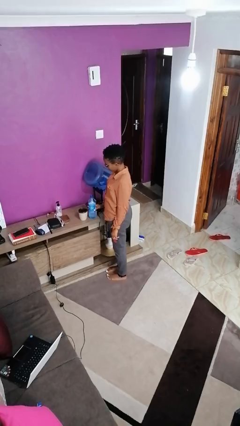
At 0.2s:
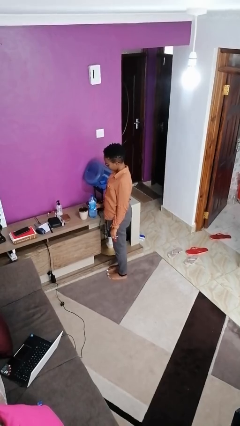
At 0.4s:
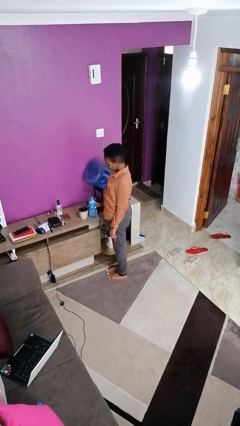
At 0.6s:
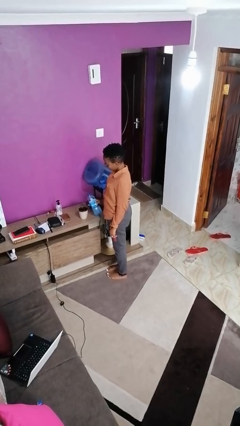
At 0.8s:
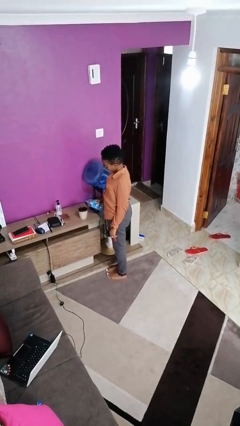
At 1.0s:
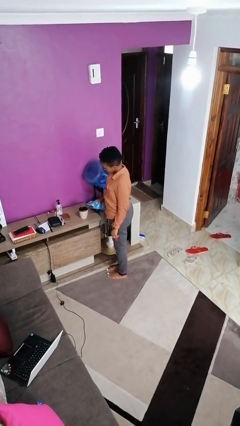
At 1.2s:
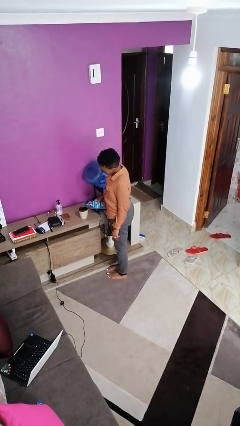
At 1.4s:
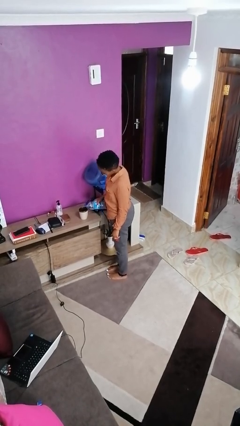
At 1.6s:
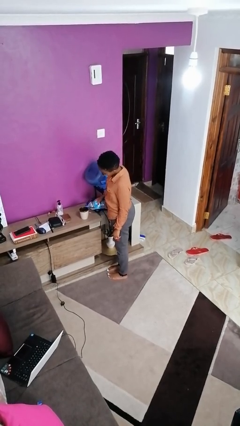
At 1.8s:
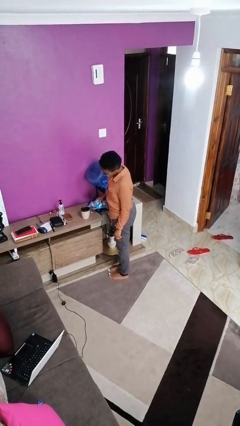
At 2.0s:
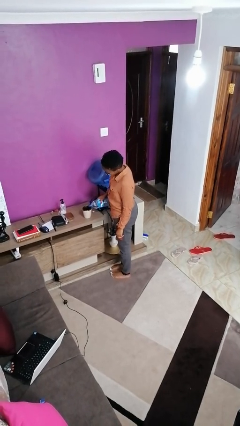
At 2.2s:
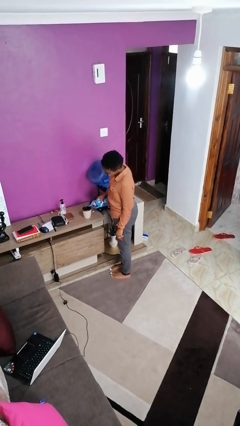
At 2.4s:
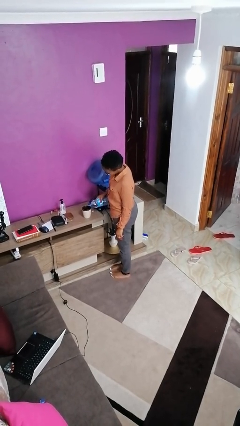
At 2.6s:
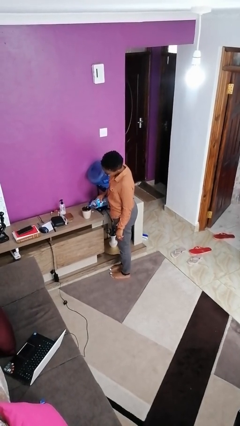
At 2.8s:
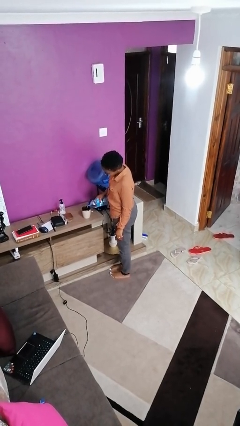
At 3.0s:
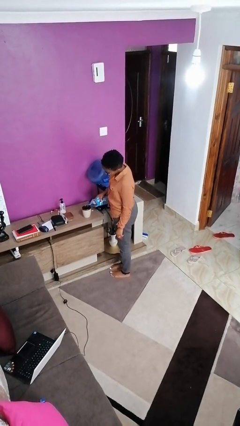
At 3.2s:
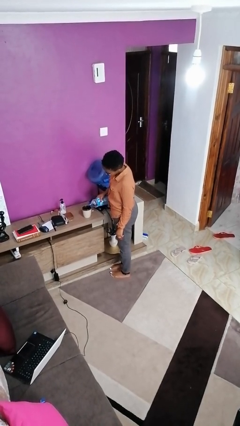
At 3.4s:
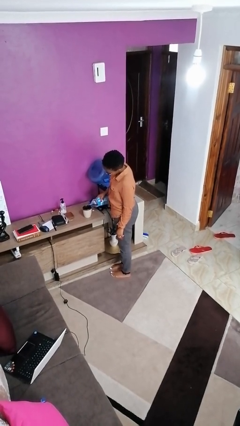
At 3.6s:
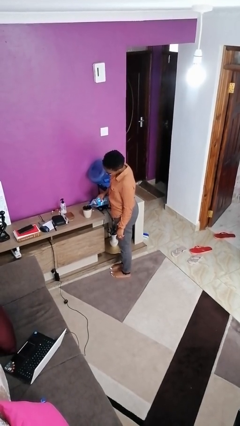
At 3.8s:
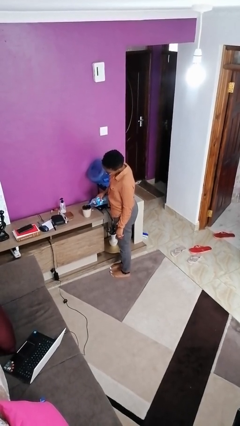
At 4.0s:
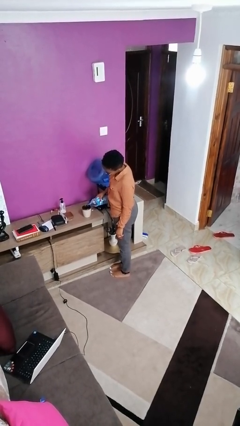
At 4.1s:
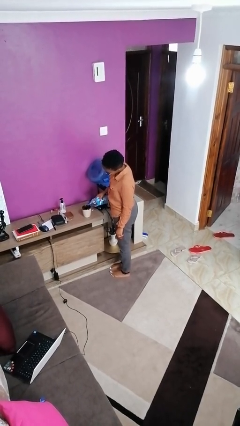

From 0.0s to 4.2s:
person pours liquid into cup

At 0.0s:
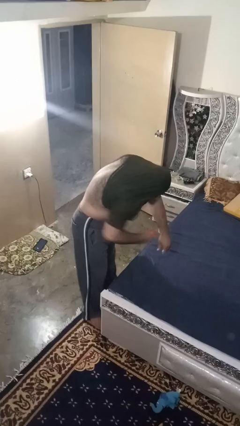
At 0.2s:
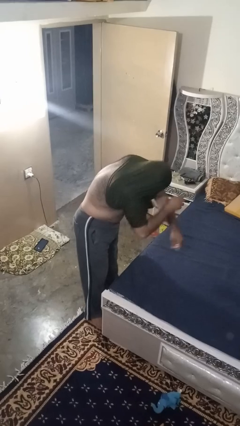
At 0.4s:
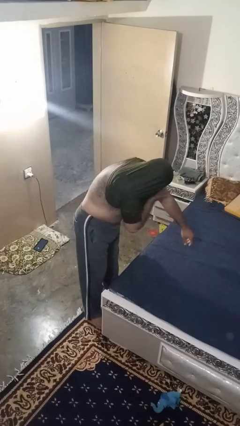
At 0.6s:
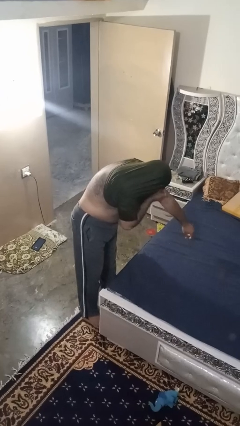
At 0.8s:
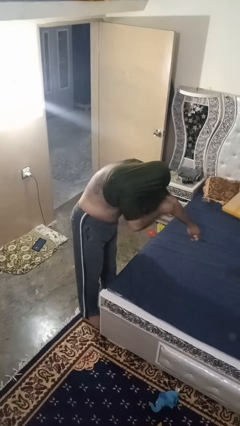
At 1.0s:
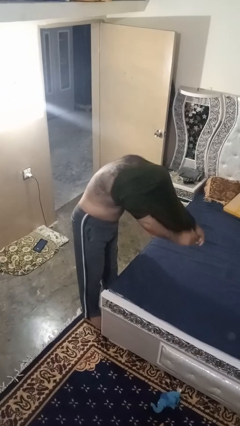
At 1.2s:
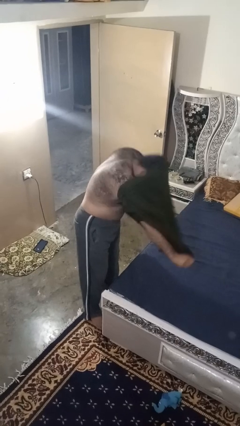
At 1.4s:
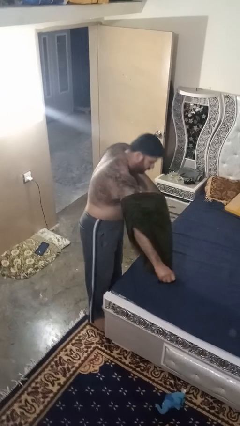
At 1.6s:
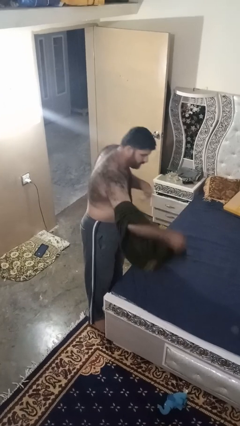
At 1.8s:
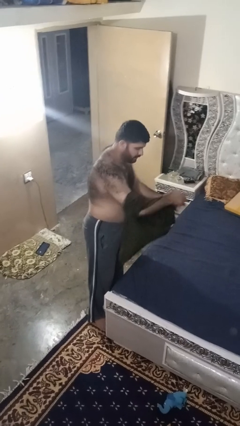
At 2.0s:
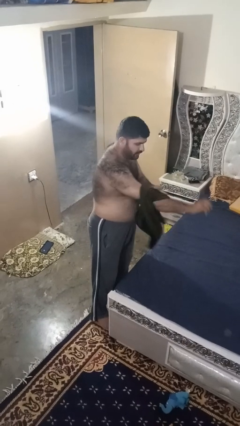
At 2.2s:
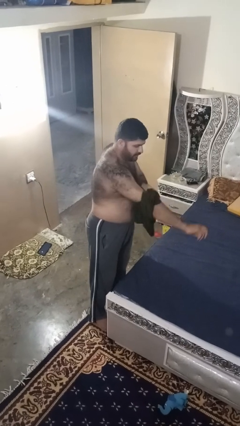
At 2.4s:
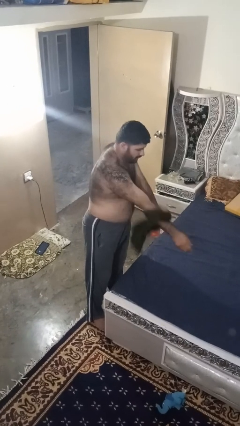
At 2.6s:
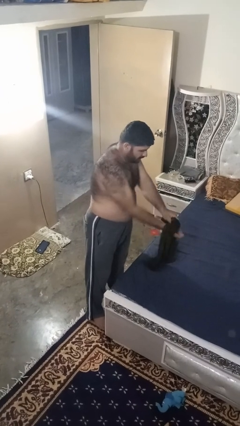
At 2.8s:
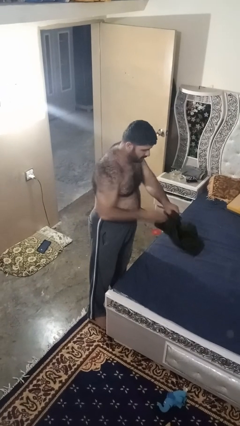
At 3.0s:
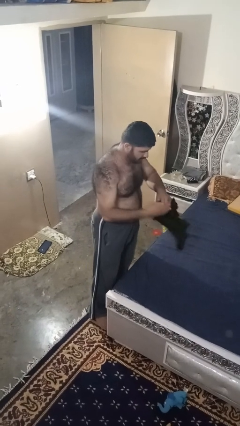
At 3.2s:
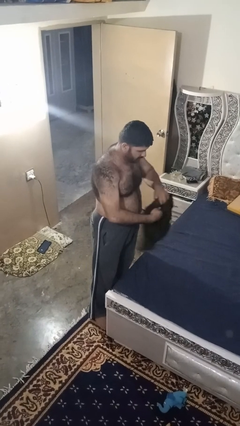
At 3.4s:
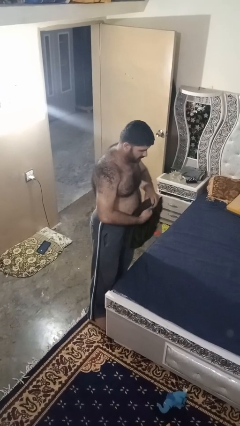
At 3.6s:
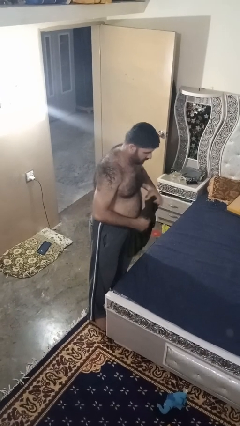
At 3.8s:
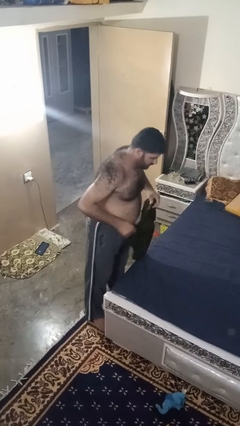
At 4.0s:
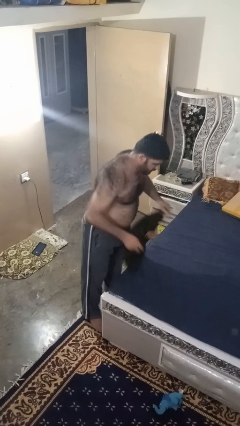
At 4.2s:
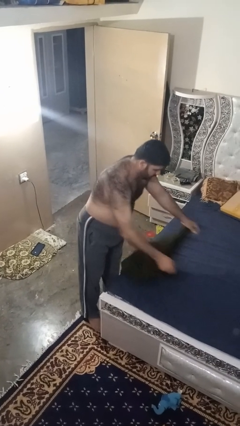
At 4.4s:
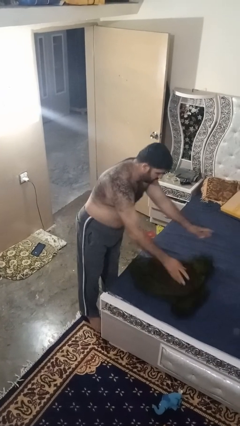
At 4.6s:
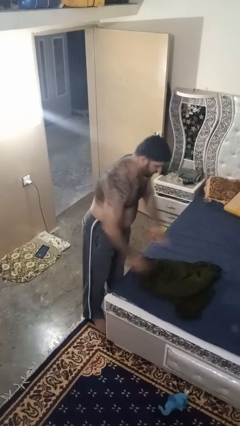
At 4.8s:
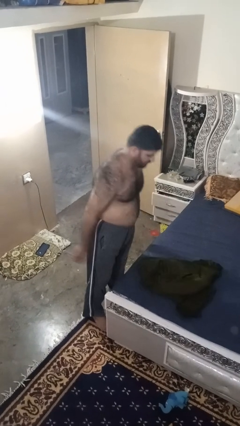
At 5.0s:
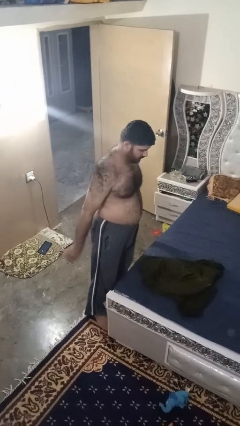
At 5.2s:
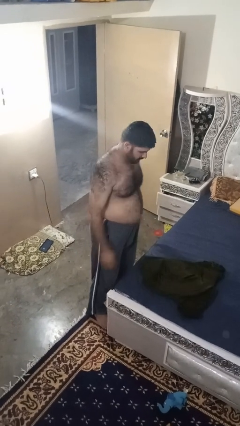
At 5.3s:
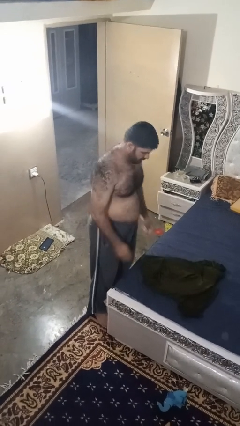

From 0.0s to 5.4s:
person takes off shirt

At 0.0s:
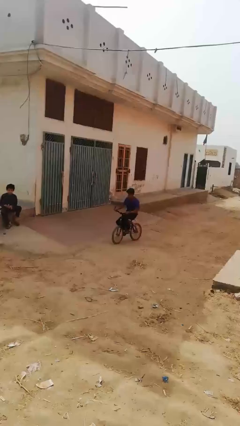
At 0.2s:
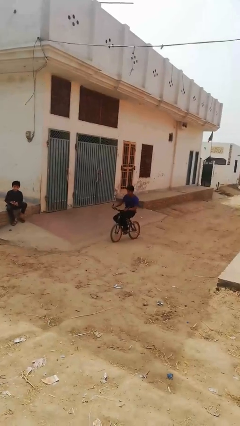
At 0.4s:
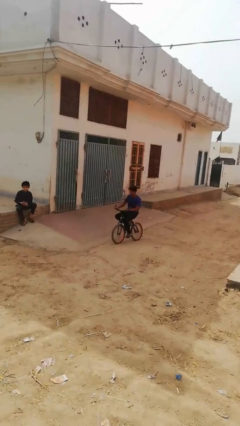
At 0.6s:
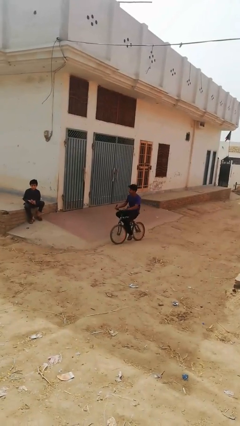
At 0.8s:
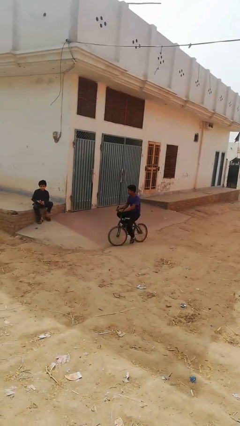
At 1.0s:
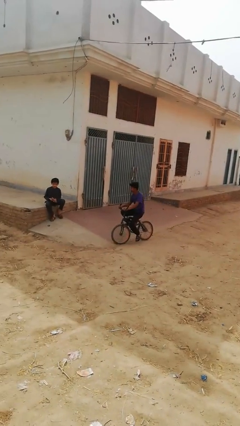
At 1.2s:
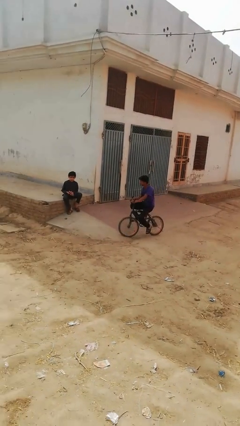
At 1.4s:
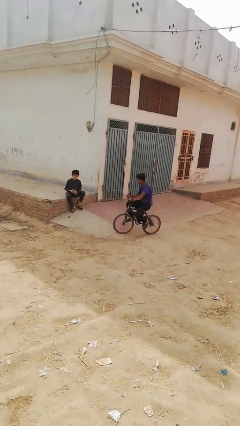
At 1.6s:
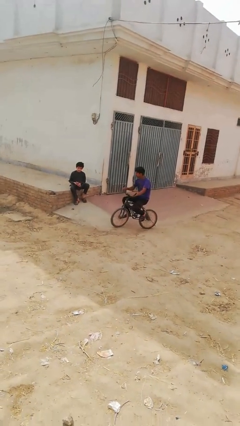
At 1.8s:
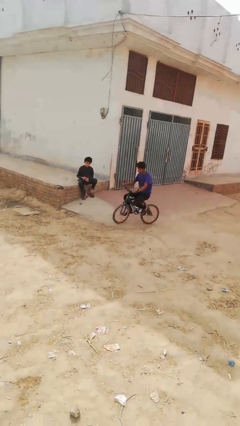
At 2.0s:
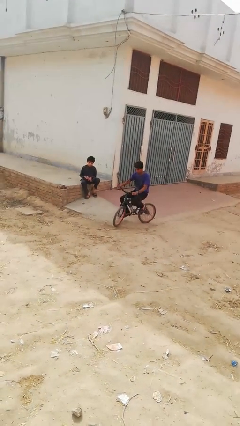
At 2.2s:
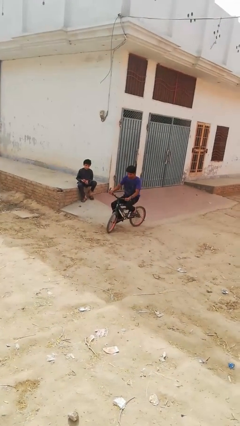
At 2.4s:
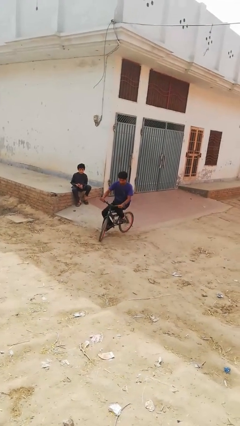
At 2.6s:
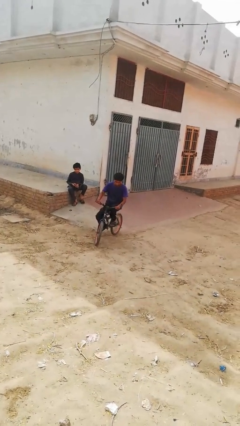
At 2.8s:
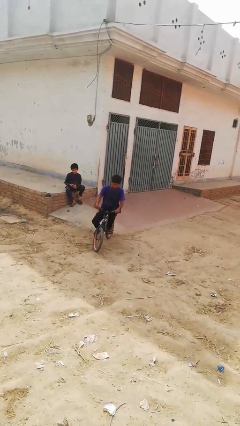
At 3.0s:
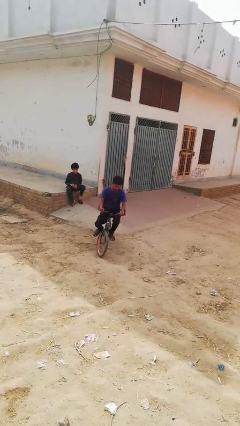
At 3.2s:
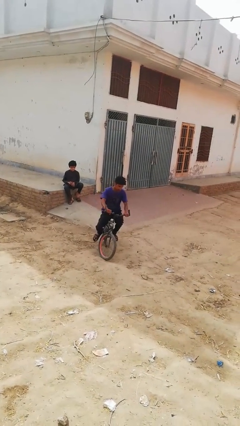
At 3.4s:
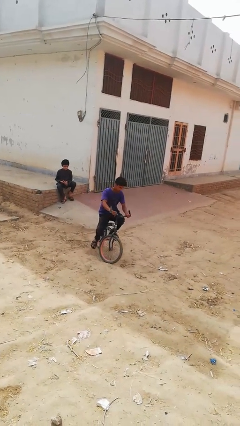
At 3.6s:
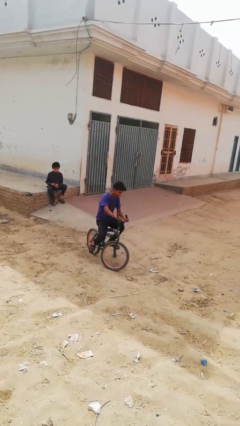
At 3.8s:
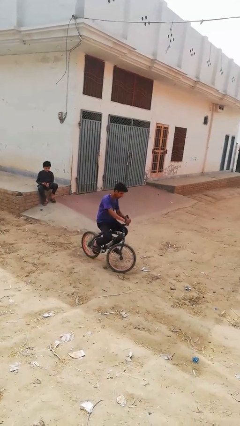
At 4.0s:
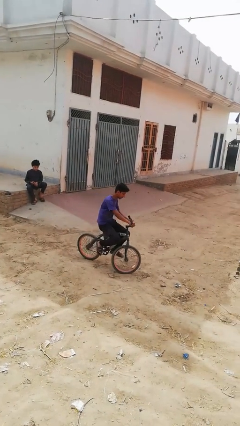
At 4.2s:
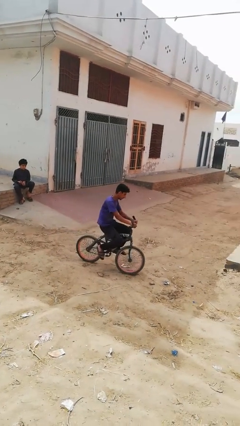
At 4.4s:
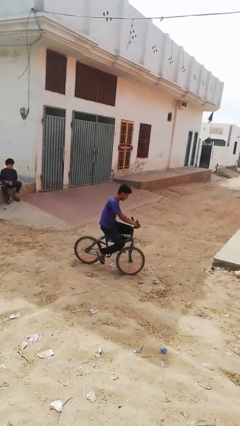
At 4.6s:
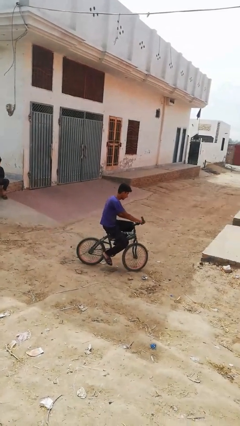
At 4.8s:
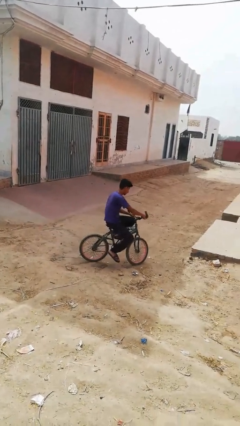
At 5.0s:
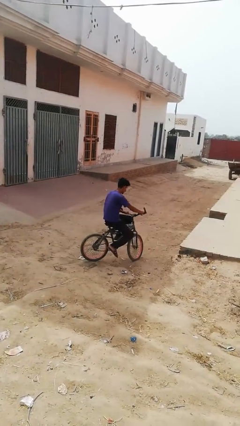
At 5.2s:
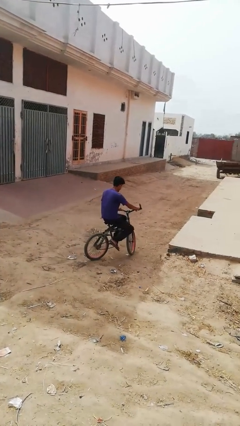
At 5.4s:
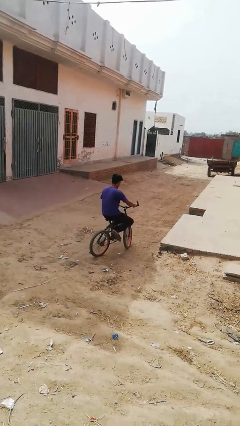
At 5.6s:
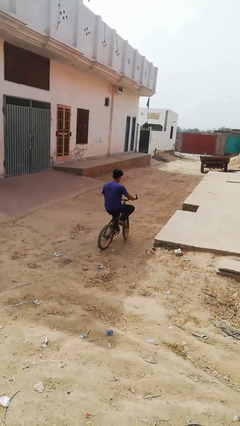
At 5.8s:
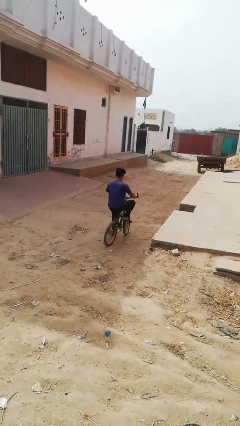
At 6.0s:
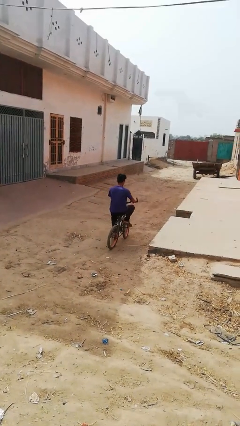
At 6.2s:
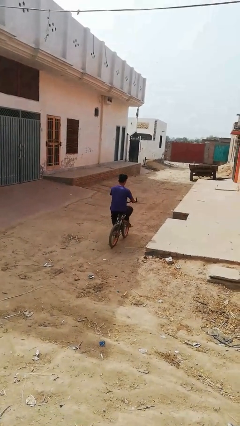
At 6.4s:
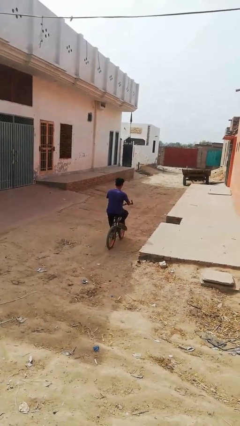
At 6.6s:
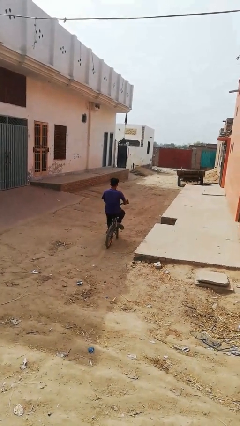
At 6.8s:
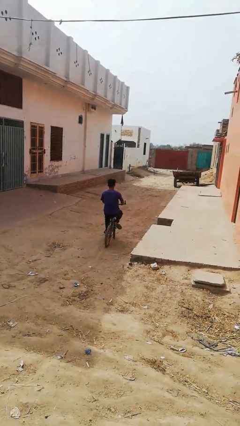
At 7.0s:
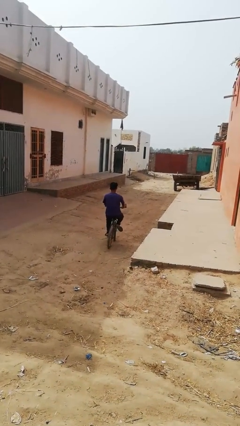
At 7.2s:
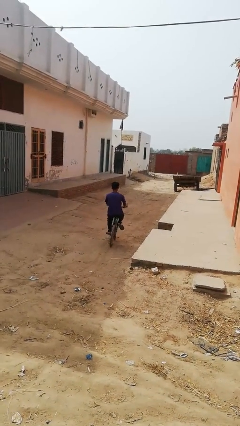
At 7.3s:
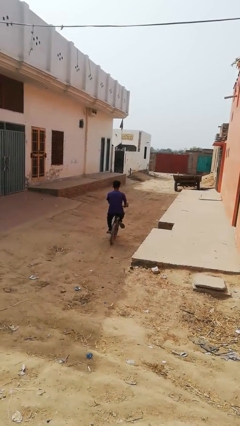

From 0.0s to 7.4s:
person rides bicycle

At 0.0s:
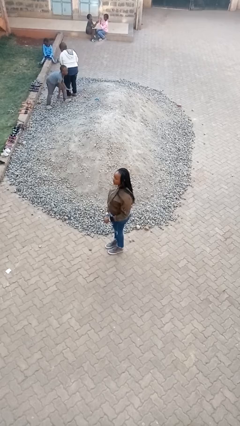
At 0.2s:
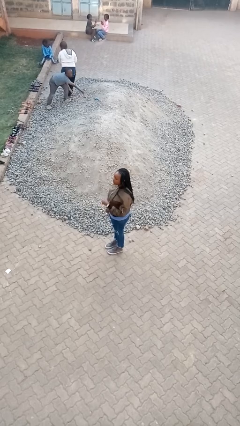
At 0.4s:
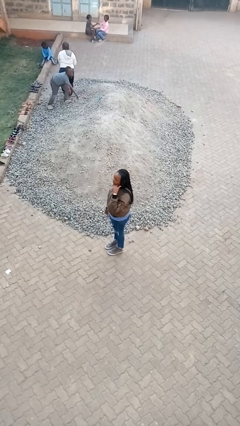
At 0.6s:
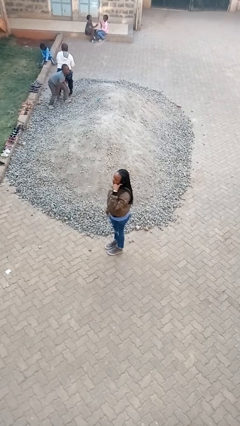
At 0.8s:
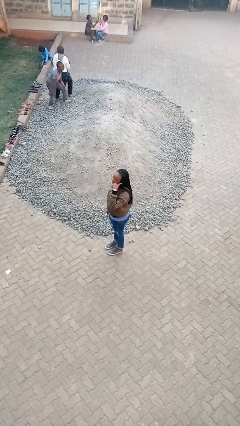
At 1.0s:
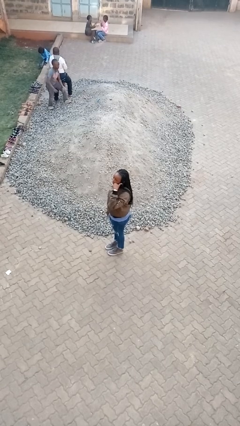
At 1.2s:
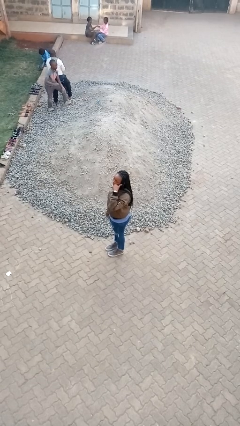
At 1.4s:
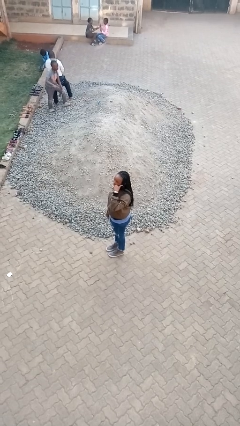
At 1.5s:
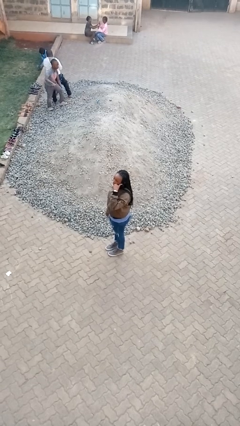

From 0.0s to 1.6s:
person gestures call me
